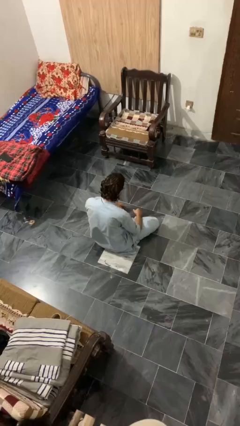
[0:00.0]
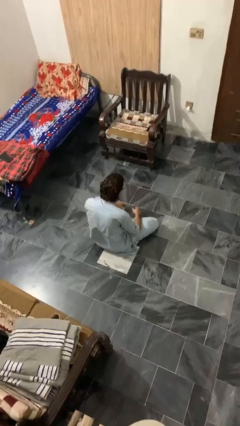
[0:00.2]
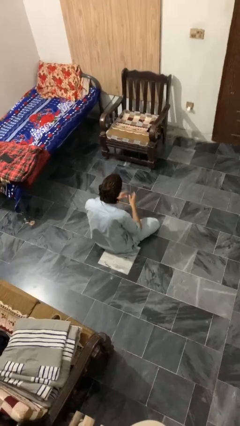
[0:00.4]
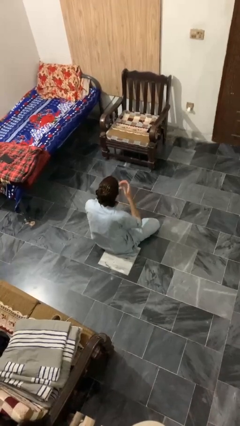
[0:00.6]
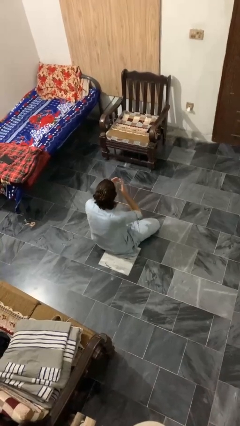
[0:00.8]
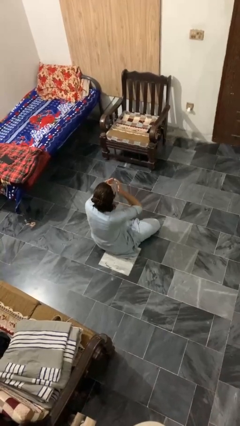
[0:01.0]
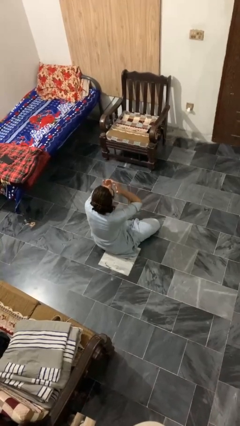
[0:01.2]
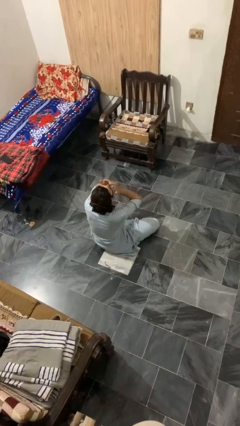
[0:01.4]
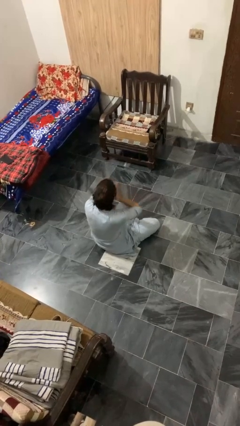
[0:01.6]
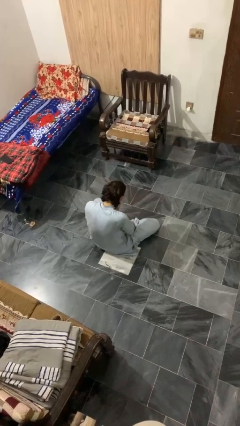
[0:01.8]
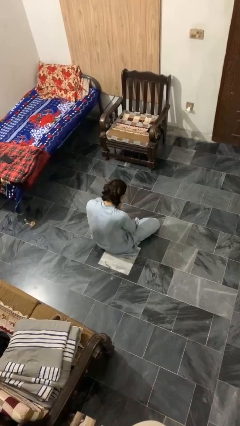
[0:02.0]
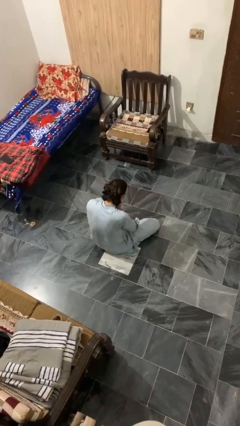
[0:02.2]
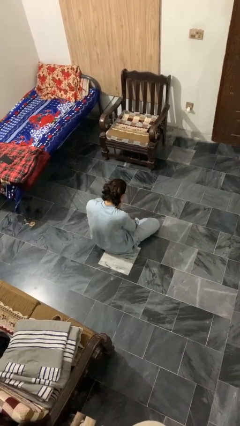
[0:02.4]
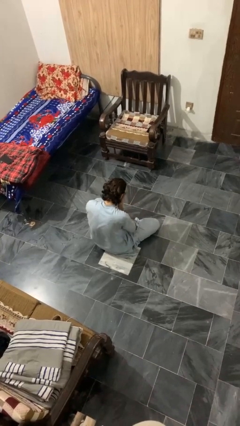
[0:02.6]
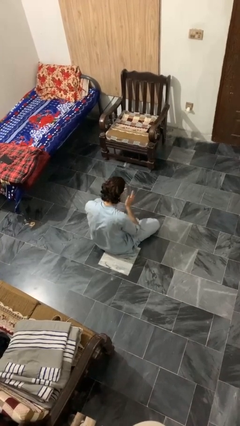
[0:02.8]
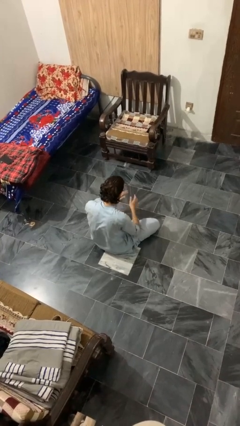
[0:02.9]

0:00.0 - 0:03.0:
person sneezes into hand

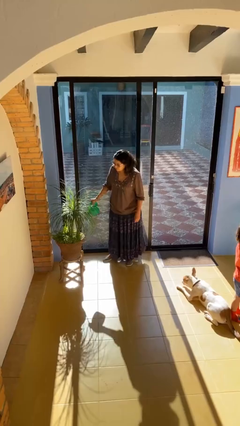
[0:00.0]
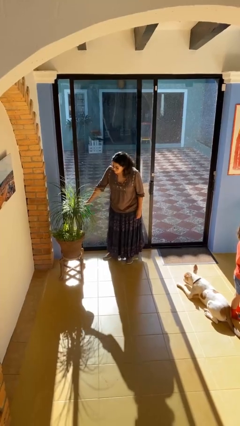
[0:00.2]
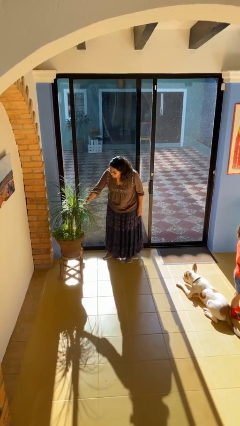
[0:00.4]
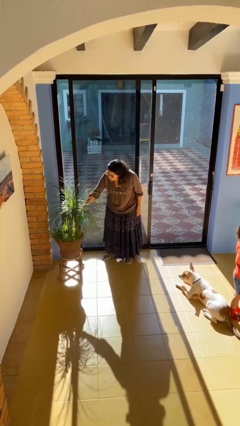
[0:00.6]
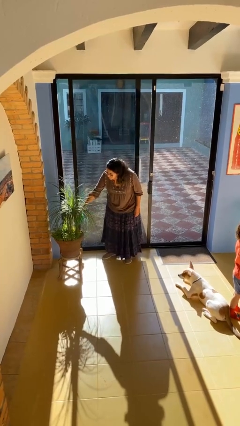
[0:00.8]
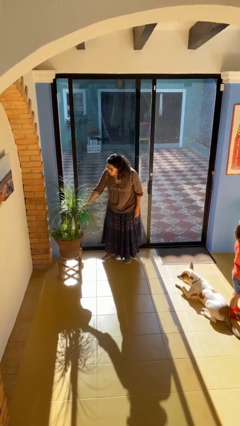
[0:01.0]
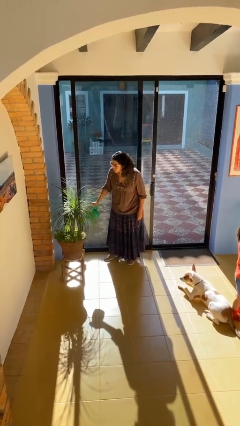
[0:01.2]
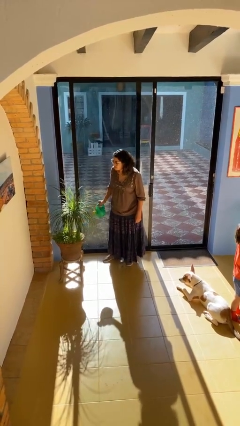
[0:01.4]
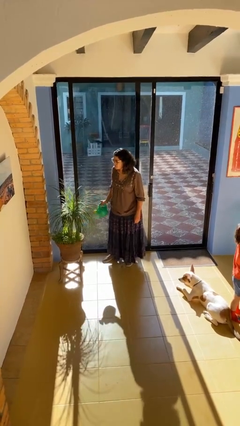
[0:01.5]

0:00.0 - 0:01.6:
person waters houseplant

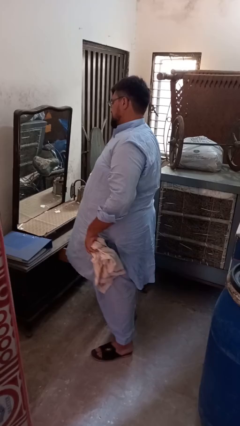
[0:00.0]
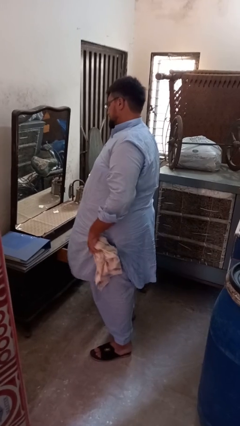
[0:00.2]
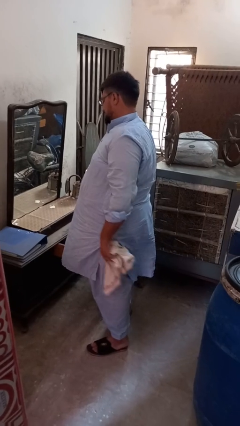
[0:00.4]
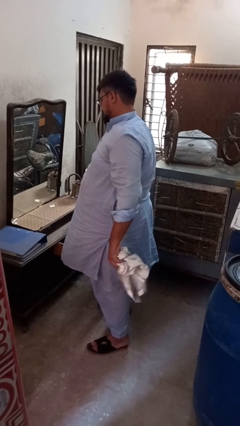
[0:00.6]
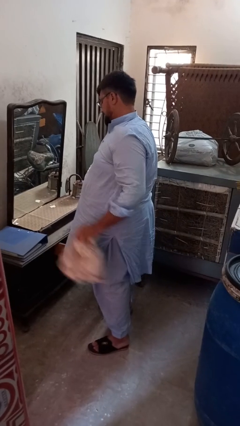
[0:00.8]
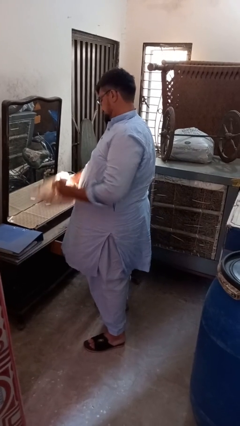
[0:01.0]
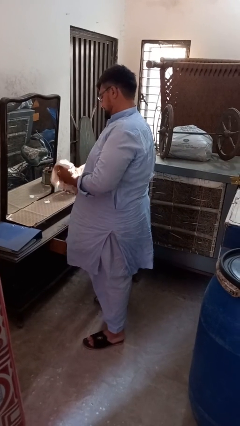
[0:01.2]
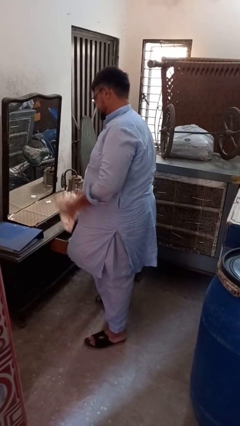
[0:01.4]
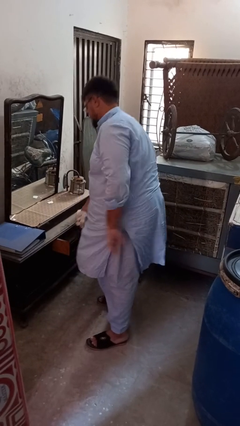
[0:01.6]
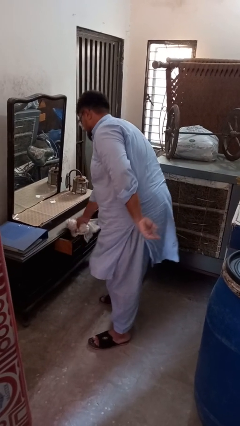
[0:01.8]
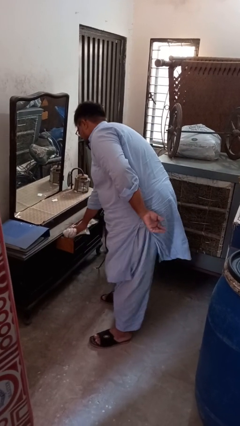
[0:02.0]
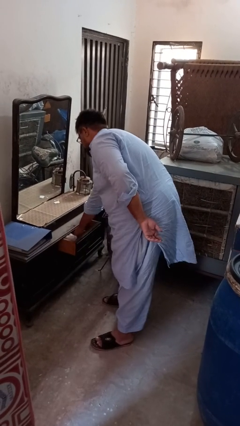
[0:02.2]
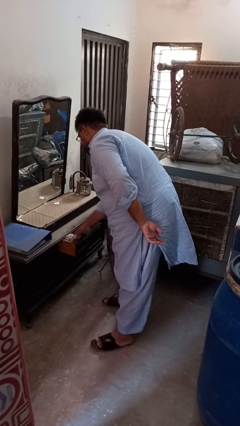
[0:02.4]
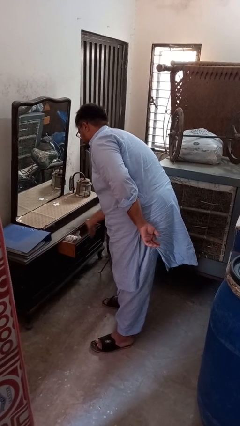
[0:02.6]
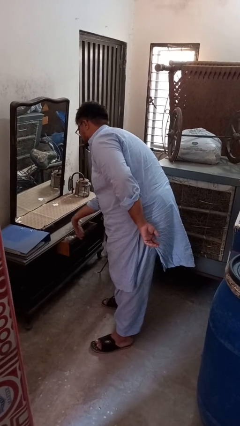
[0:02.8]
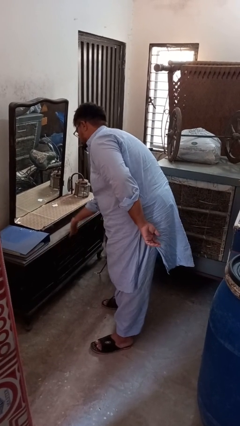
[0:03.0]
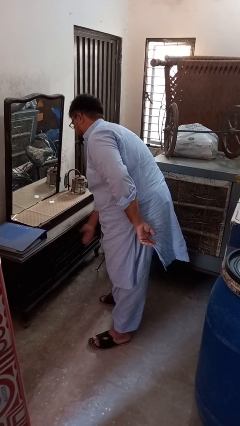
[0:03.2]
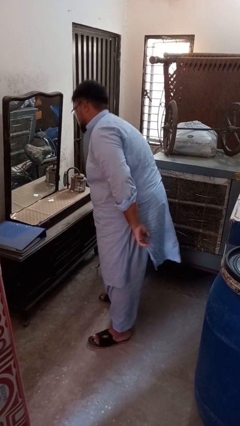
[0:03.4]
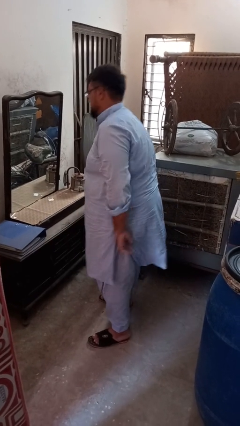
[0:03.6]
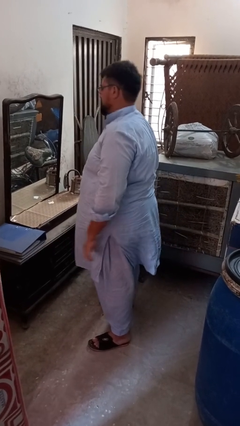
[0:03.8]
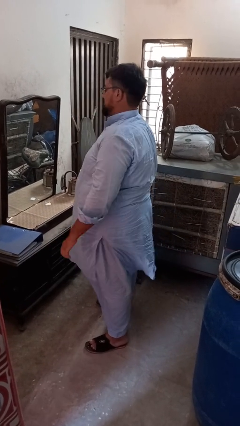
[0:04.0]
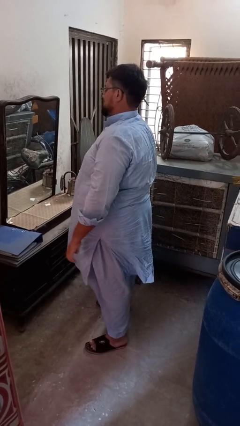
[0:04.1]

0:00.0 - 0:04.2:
person puts clothes into dresser

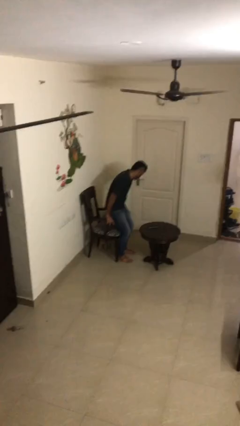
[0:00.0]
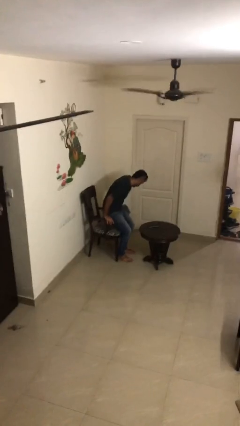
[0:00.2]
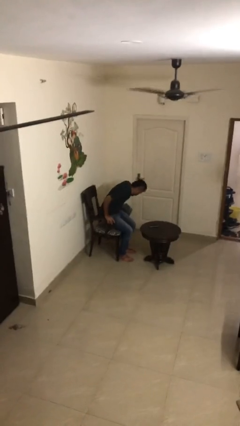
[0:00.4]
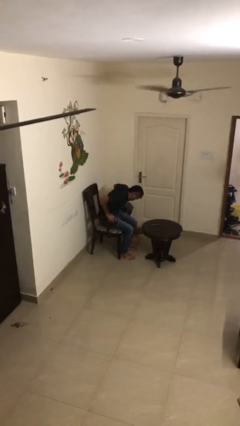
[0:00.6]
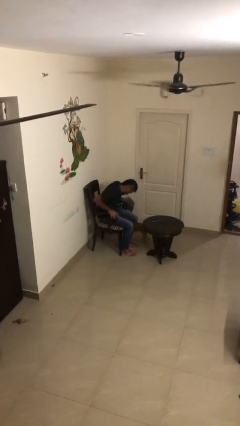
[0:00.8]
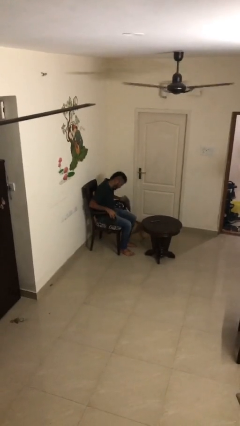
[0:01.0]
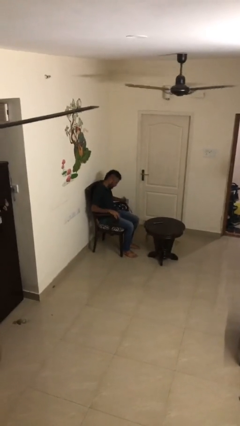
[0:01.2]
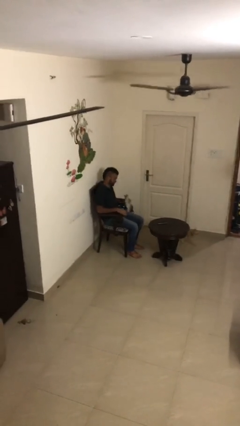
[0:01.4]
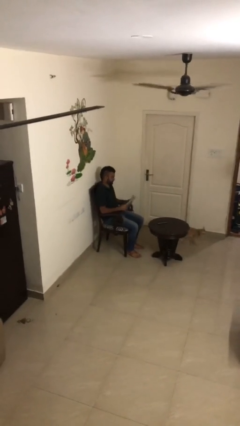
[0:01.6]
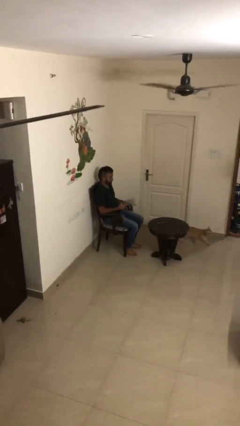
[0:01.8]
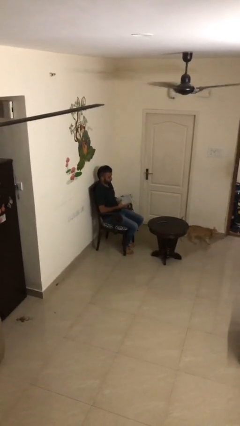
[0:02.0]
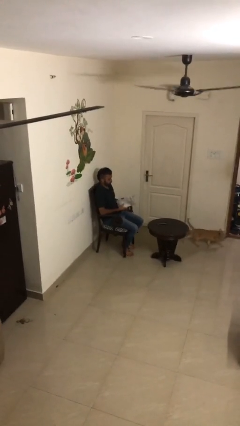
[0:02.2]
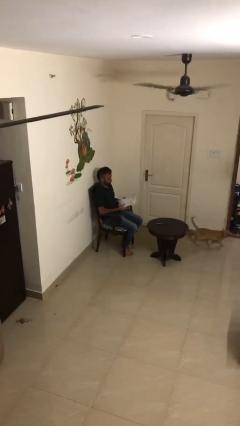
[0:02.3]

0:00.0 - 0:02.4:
person sits down

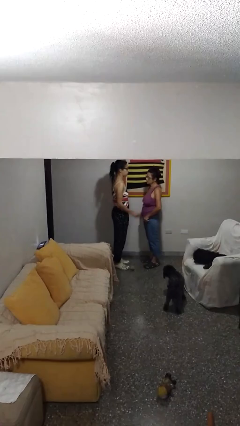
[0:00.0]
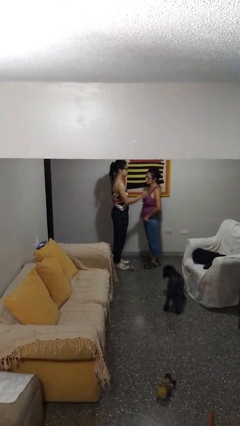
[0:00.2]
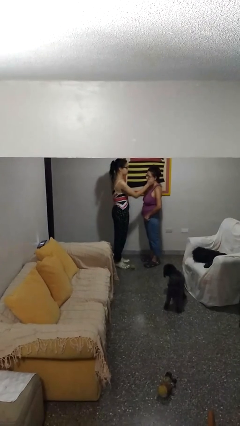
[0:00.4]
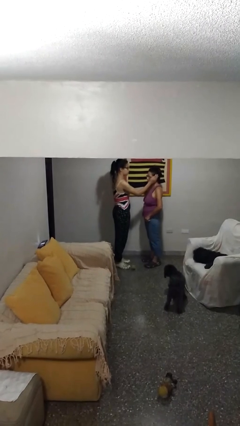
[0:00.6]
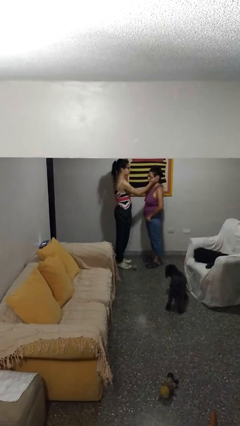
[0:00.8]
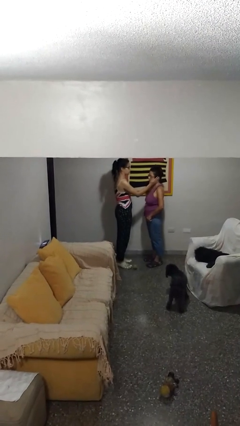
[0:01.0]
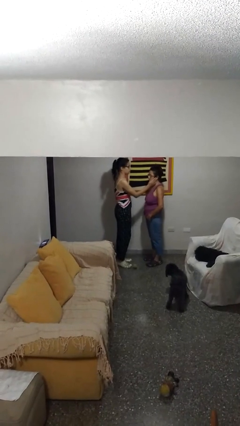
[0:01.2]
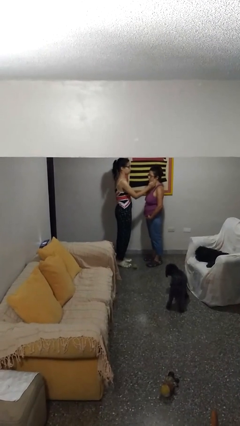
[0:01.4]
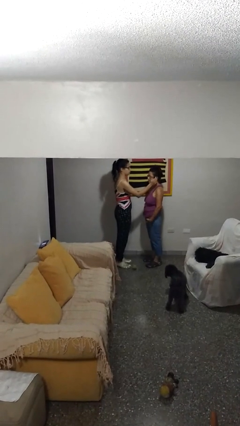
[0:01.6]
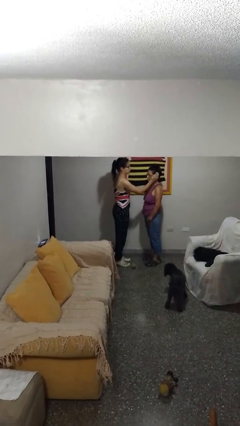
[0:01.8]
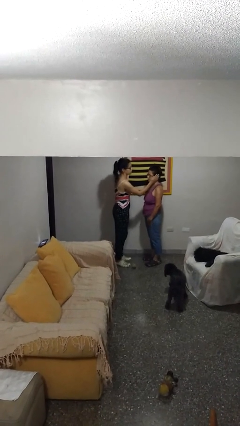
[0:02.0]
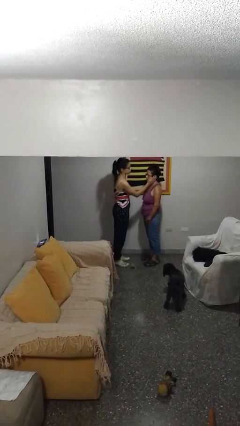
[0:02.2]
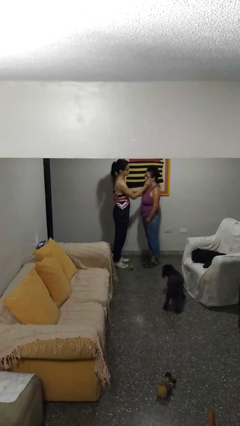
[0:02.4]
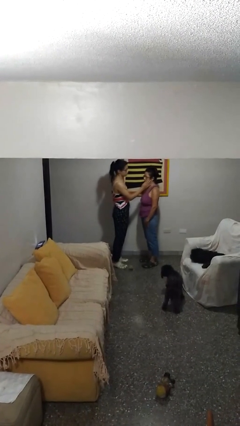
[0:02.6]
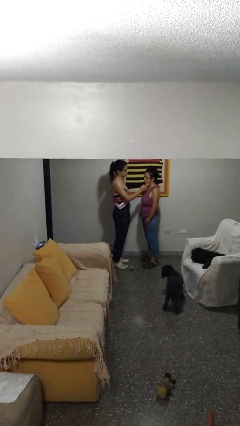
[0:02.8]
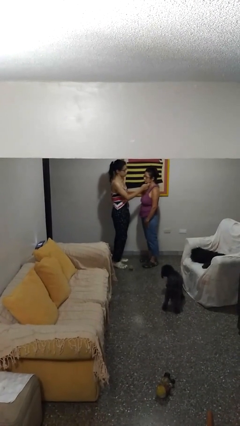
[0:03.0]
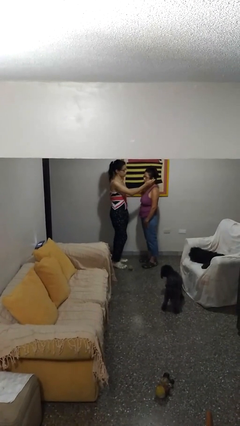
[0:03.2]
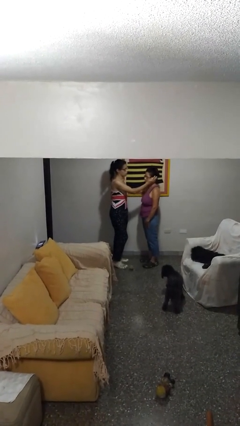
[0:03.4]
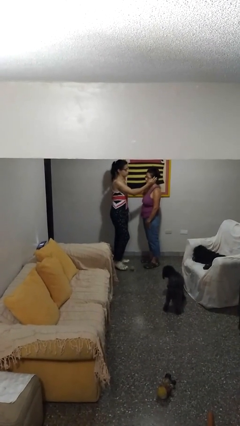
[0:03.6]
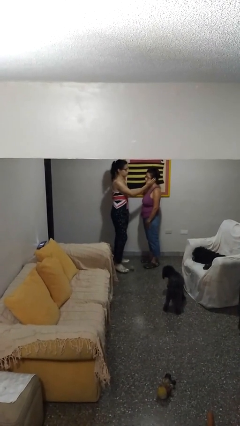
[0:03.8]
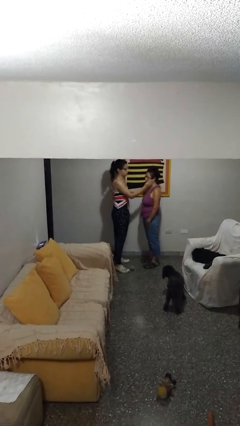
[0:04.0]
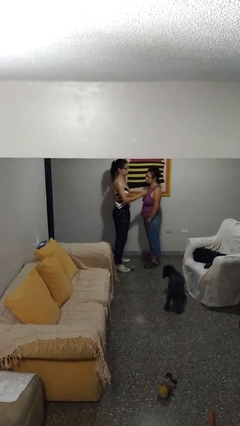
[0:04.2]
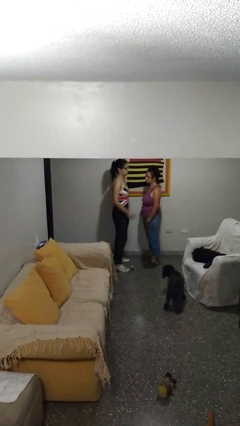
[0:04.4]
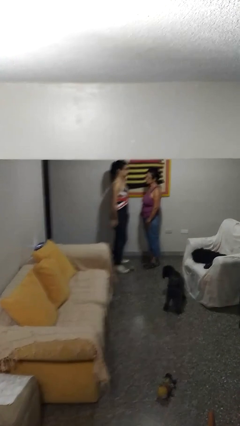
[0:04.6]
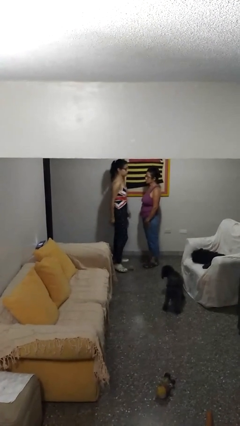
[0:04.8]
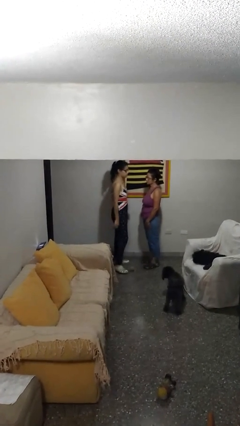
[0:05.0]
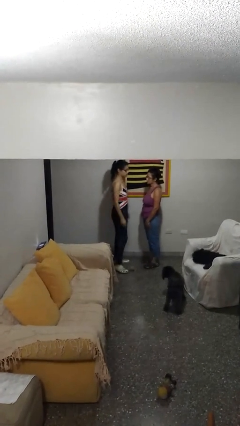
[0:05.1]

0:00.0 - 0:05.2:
person touches face of person

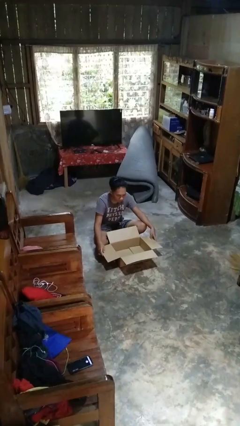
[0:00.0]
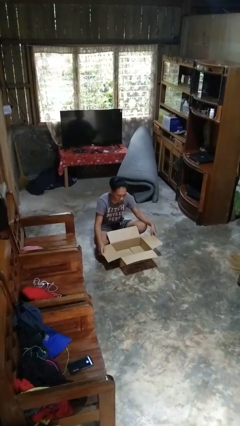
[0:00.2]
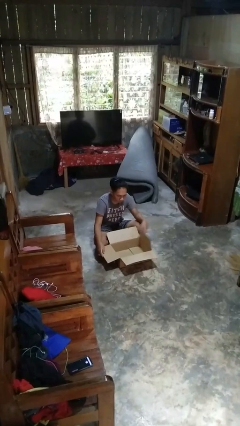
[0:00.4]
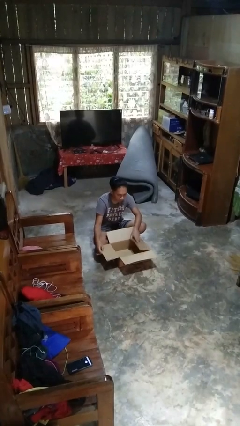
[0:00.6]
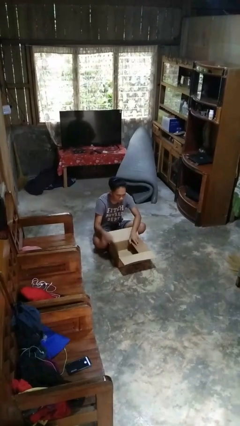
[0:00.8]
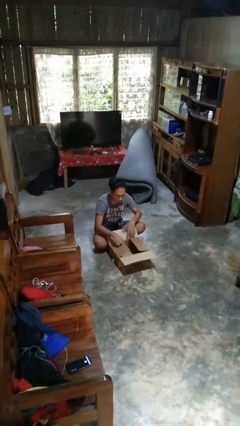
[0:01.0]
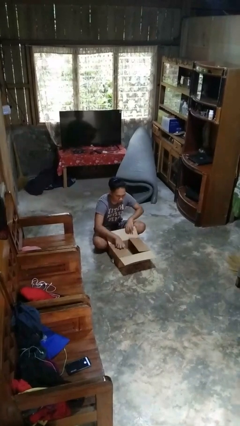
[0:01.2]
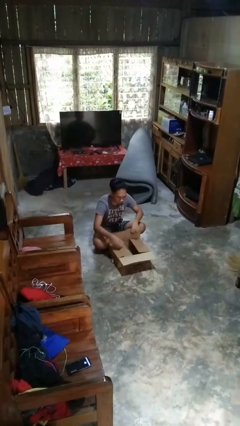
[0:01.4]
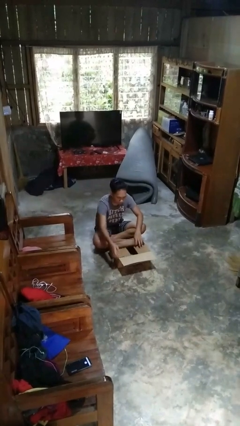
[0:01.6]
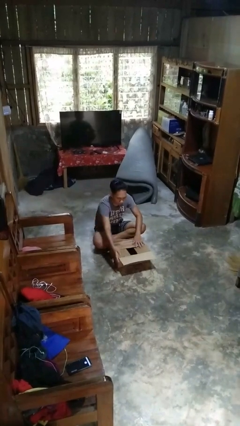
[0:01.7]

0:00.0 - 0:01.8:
person closes box
